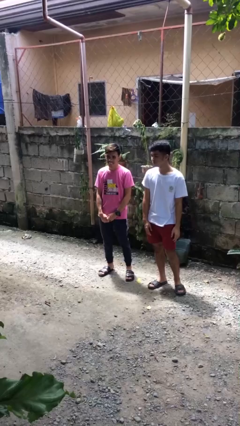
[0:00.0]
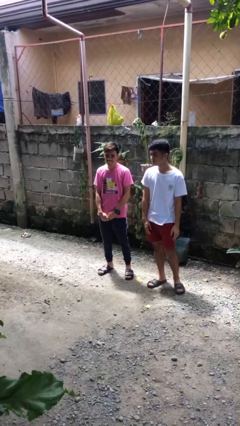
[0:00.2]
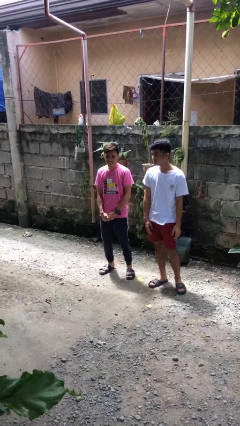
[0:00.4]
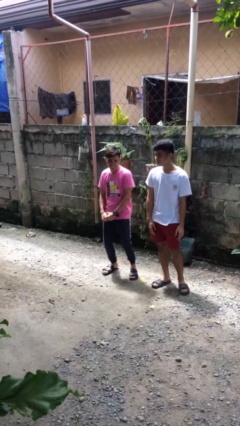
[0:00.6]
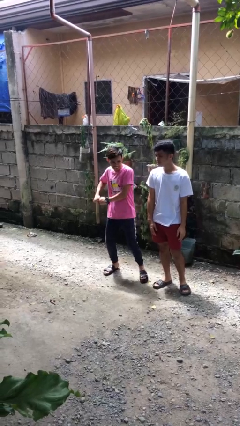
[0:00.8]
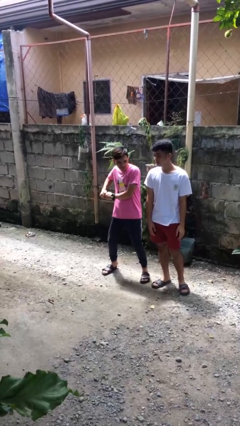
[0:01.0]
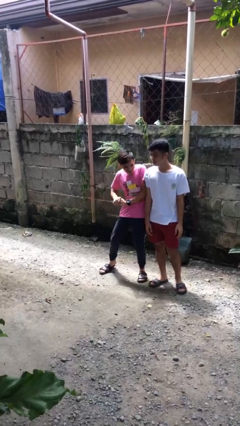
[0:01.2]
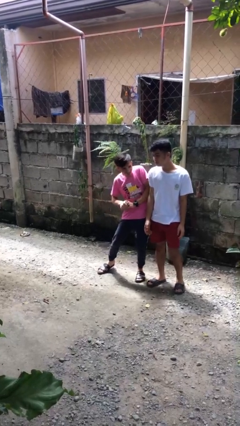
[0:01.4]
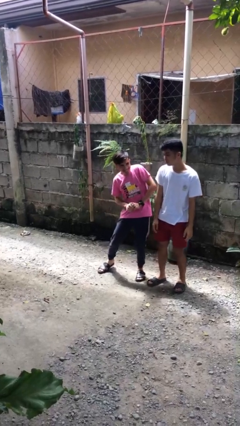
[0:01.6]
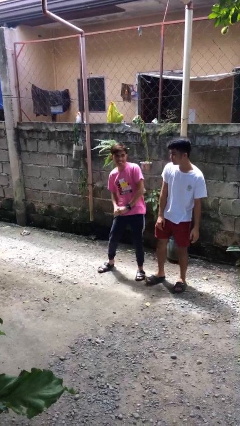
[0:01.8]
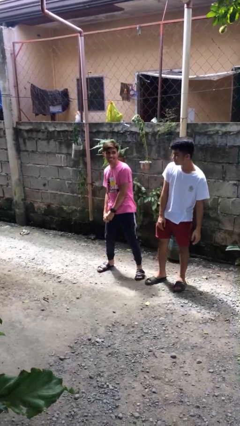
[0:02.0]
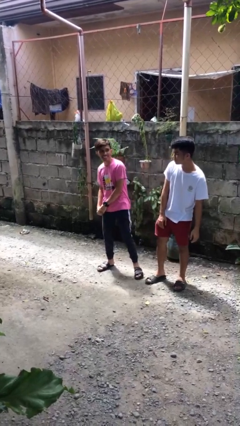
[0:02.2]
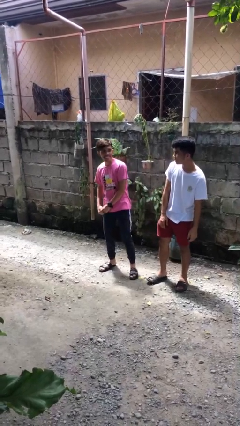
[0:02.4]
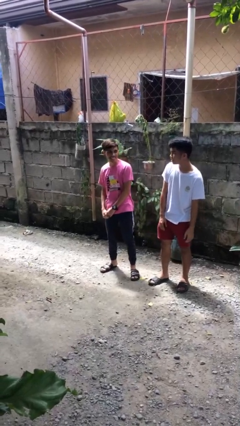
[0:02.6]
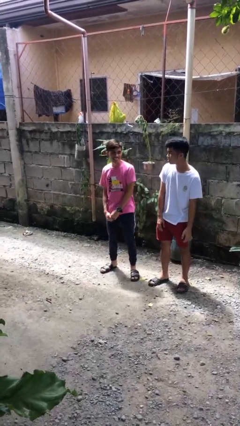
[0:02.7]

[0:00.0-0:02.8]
person nudges person with elbow

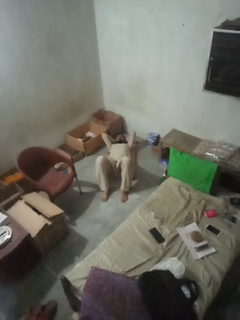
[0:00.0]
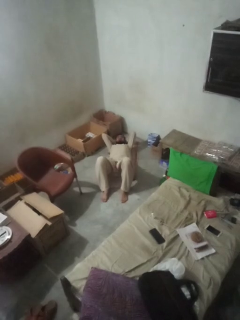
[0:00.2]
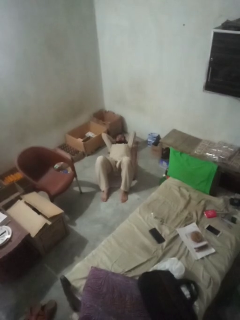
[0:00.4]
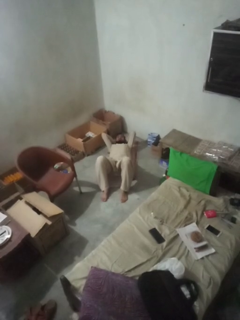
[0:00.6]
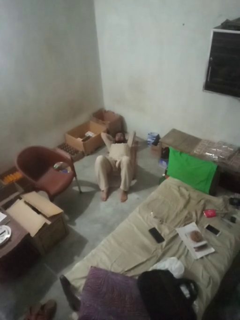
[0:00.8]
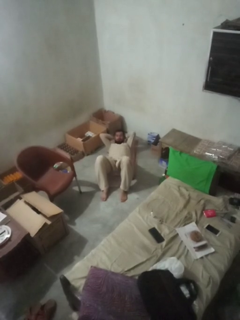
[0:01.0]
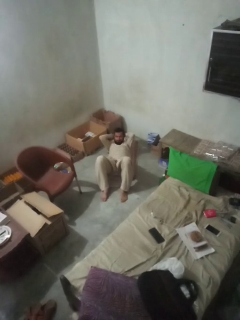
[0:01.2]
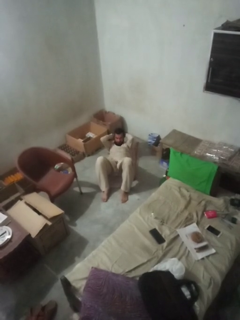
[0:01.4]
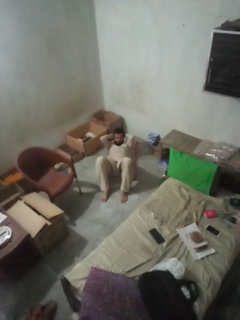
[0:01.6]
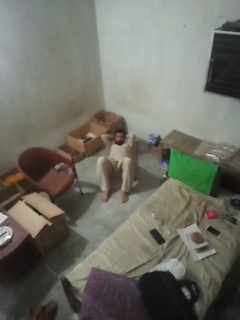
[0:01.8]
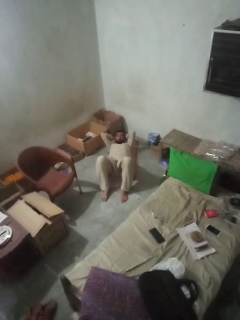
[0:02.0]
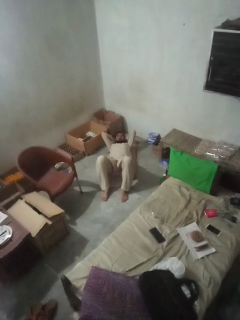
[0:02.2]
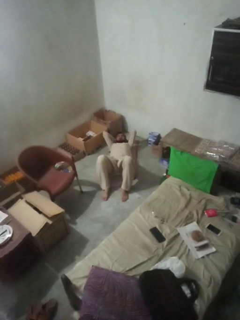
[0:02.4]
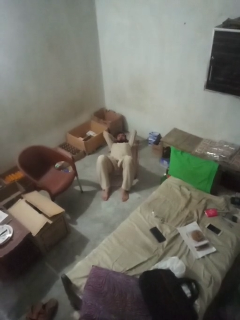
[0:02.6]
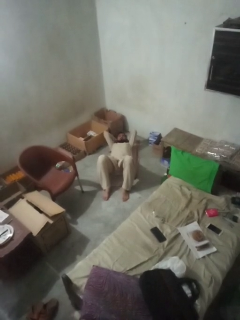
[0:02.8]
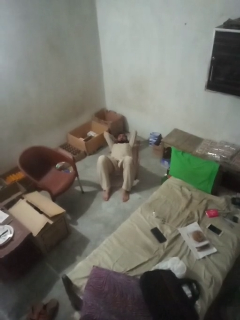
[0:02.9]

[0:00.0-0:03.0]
person exercises with situp

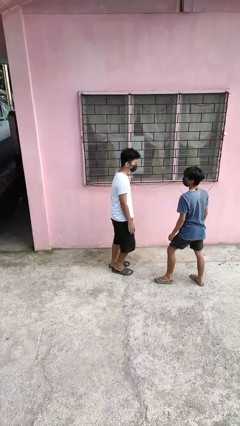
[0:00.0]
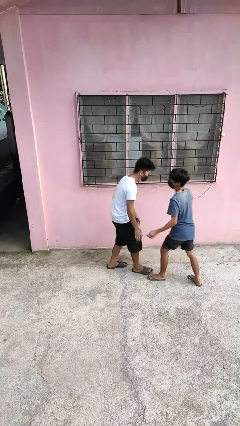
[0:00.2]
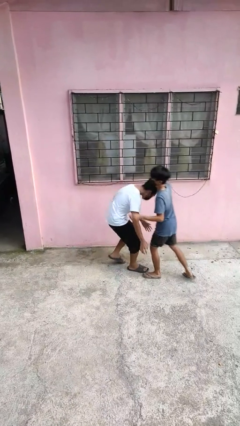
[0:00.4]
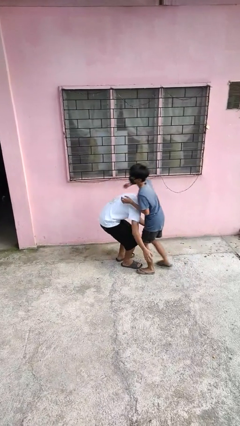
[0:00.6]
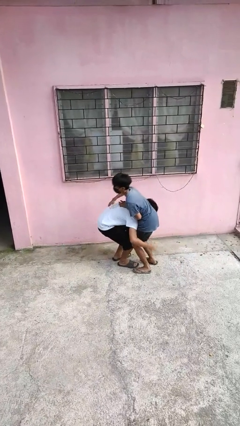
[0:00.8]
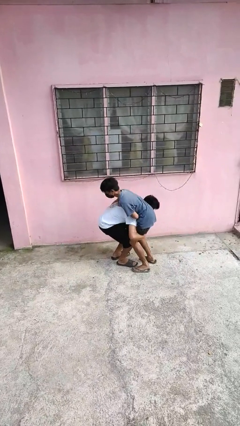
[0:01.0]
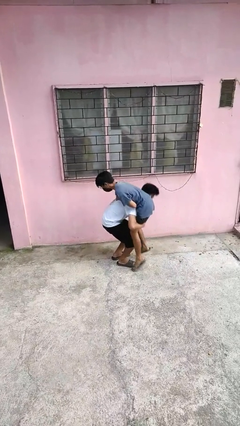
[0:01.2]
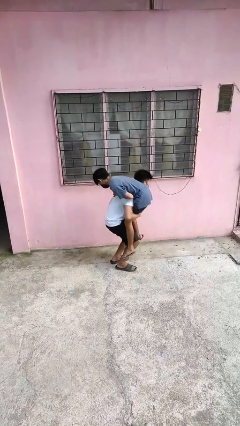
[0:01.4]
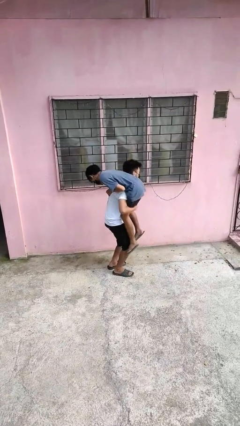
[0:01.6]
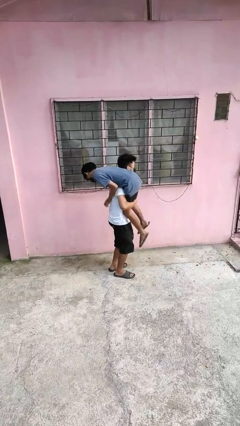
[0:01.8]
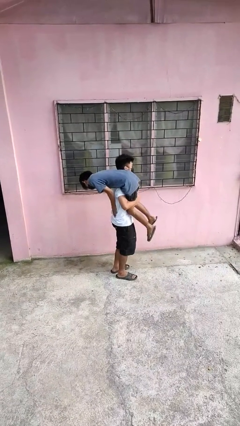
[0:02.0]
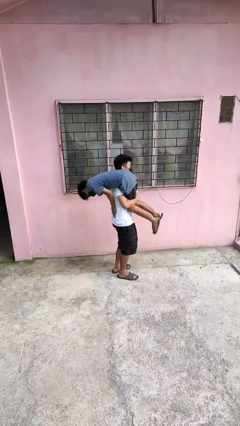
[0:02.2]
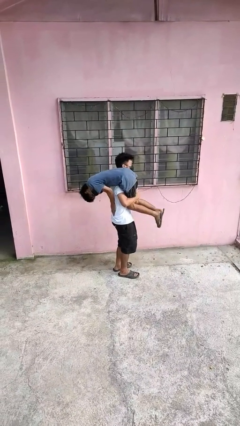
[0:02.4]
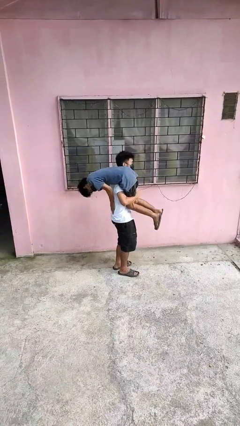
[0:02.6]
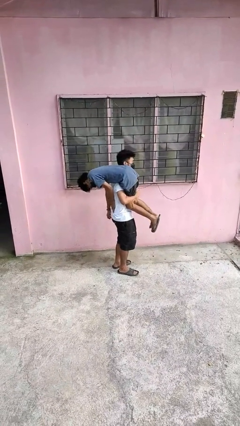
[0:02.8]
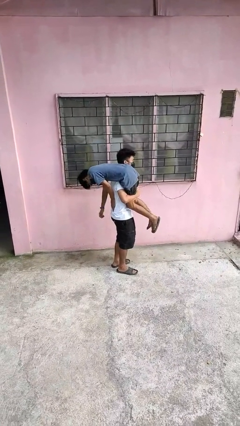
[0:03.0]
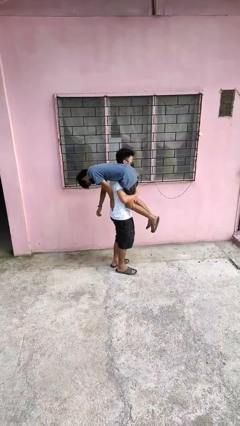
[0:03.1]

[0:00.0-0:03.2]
person carries person over shoulder

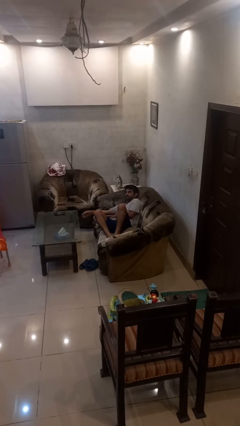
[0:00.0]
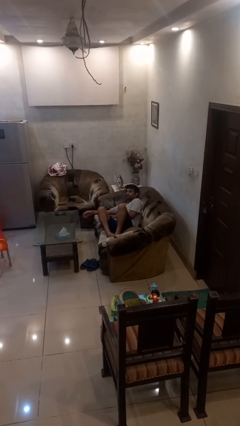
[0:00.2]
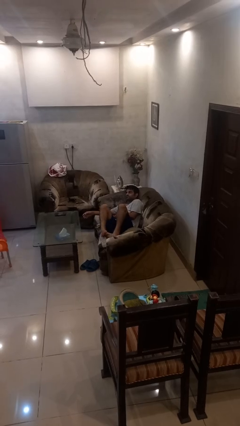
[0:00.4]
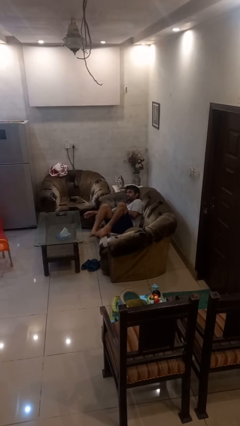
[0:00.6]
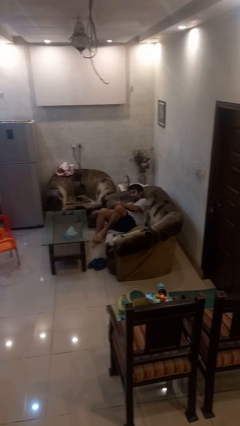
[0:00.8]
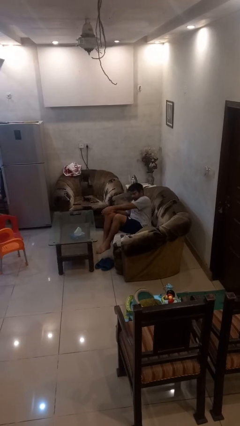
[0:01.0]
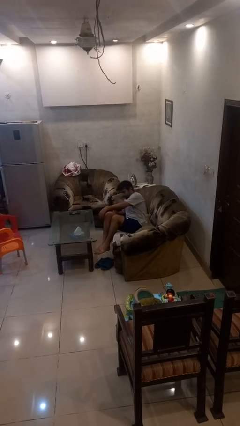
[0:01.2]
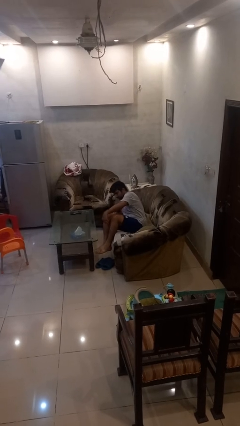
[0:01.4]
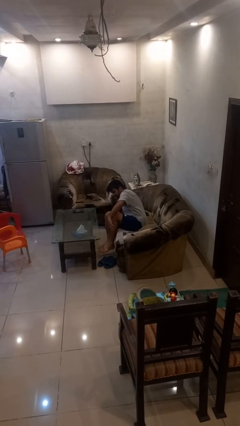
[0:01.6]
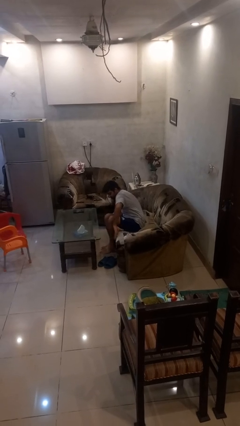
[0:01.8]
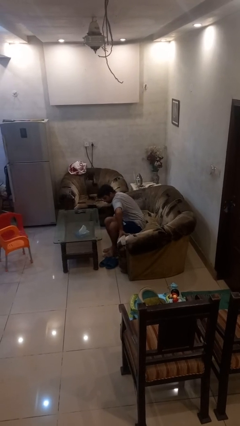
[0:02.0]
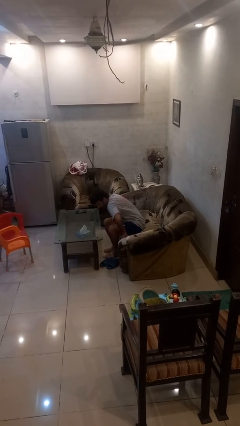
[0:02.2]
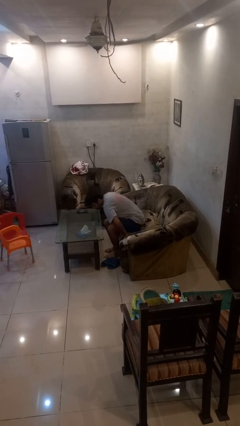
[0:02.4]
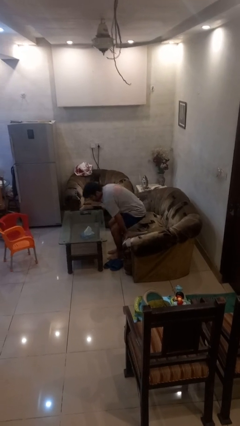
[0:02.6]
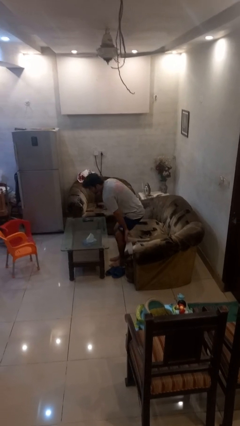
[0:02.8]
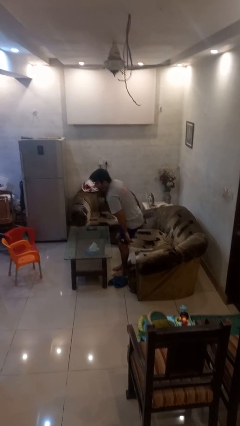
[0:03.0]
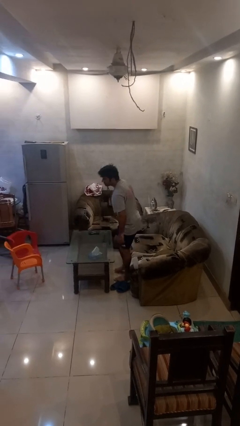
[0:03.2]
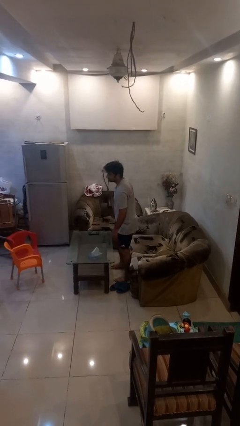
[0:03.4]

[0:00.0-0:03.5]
person stands up

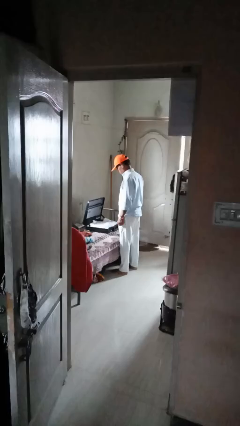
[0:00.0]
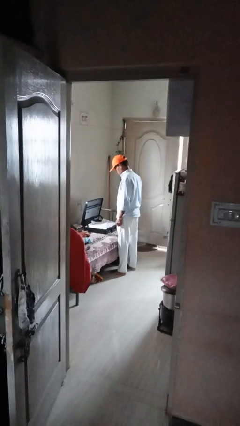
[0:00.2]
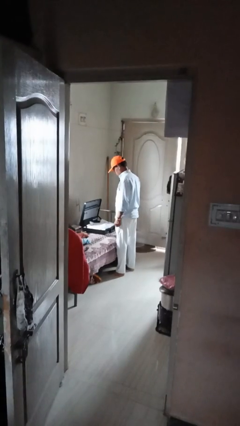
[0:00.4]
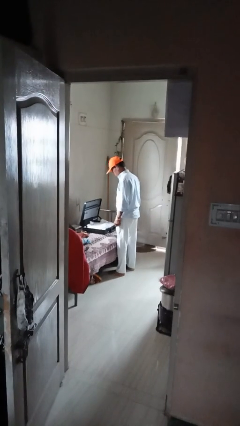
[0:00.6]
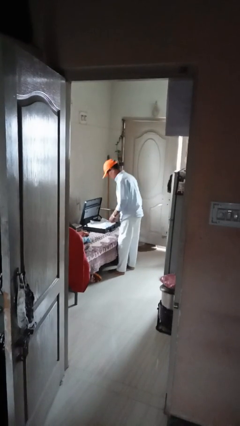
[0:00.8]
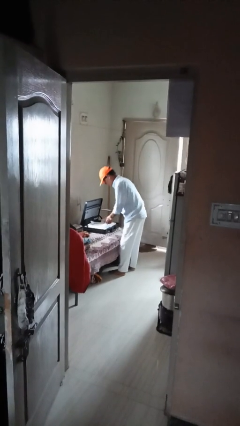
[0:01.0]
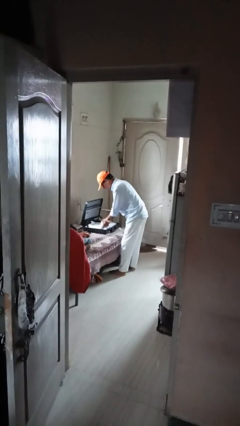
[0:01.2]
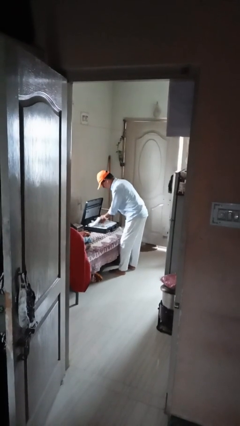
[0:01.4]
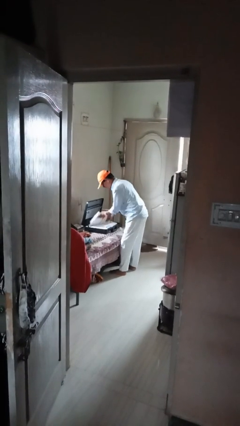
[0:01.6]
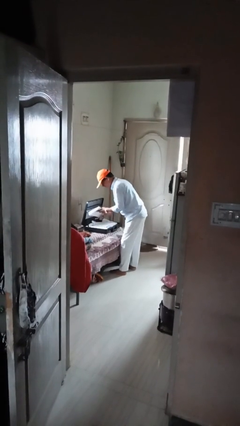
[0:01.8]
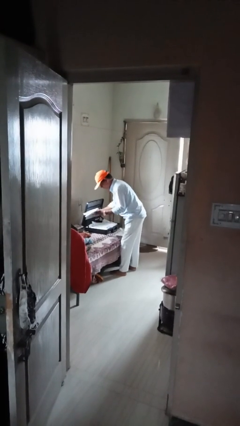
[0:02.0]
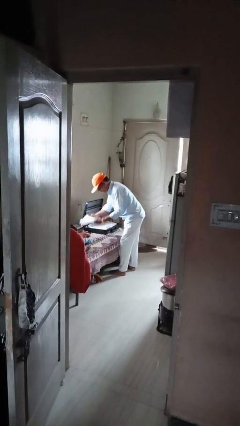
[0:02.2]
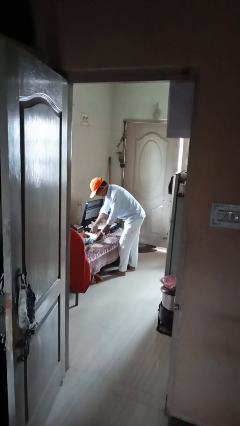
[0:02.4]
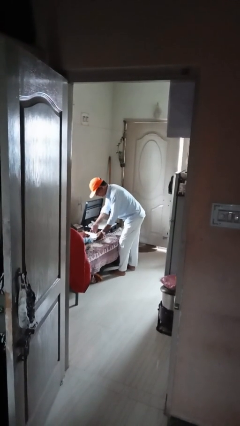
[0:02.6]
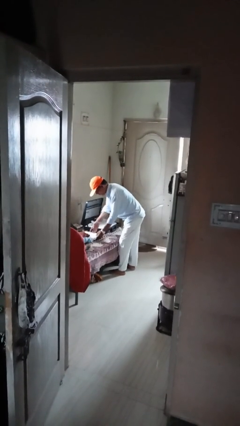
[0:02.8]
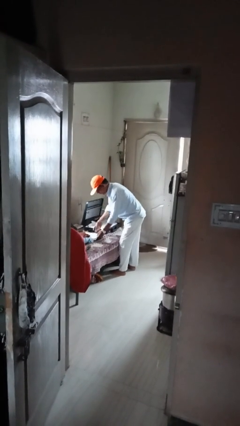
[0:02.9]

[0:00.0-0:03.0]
person unloads clothes from suitcase

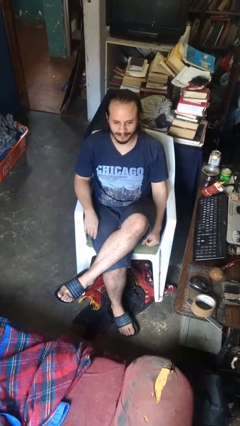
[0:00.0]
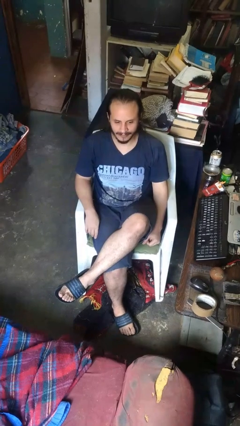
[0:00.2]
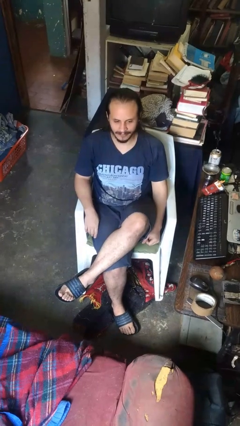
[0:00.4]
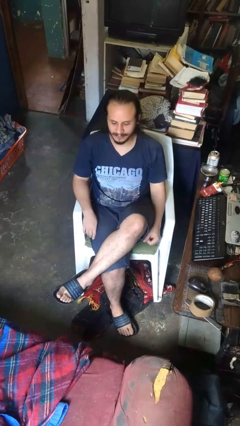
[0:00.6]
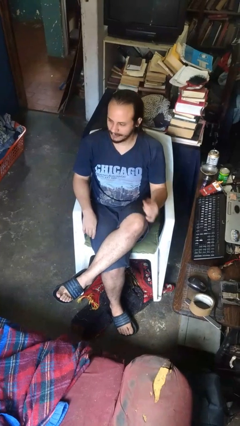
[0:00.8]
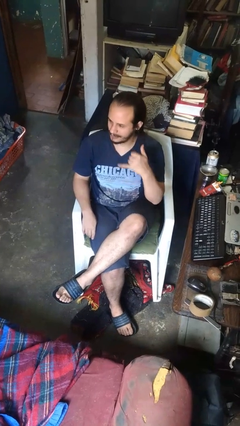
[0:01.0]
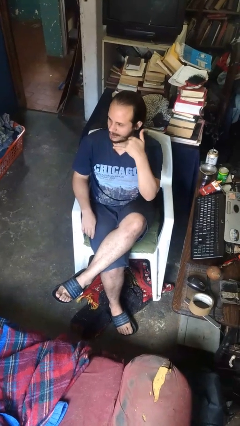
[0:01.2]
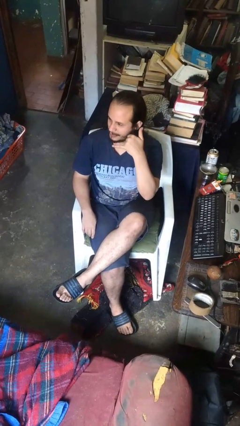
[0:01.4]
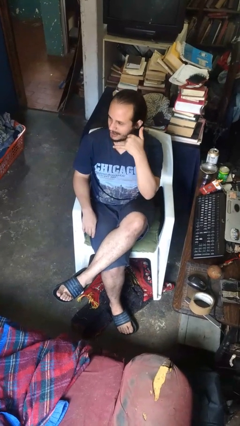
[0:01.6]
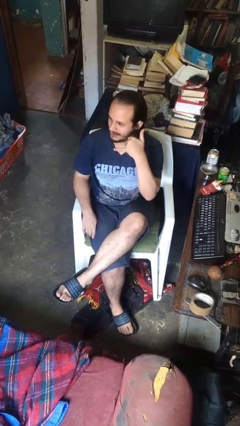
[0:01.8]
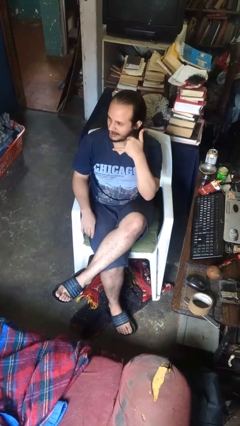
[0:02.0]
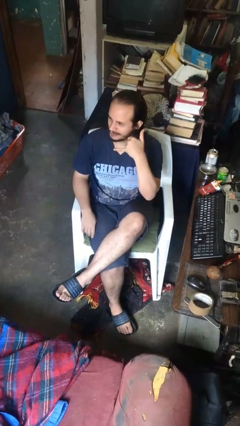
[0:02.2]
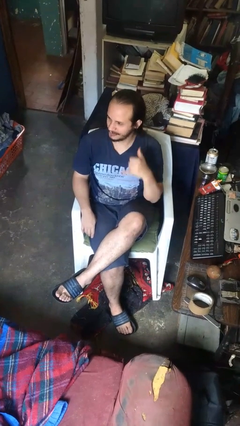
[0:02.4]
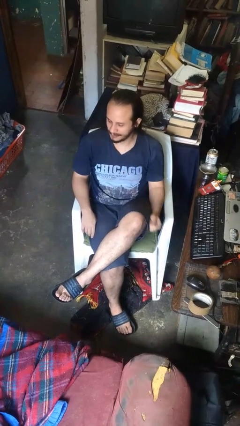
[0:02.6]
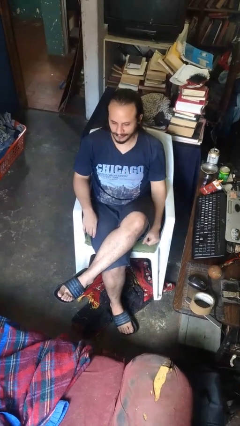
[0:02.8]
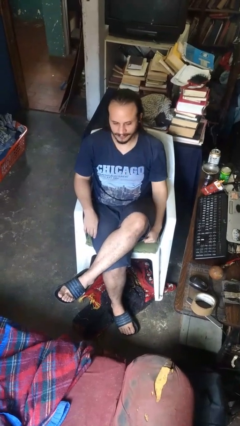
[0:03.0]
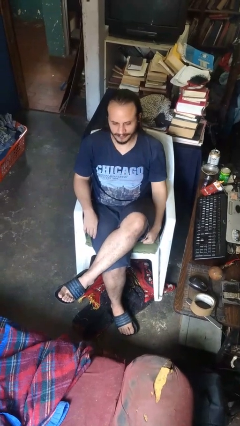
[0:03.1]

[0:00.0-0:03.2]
person gestures call me
